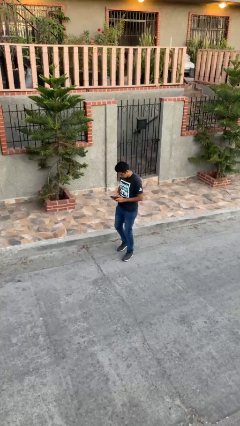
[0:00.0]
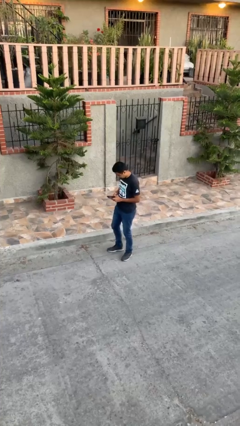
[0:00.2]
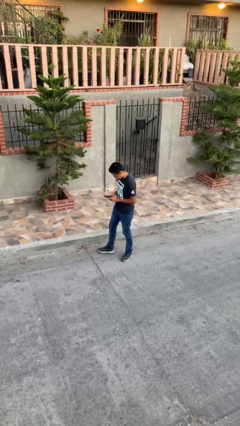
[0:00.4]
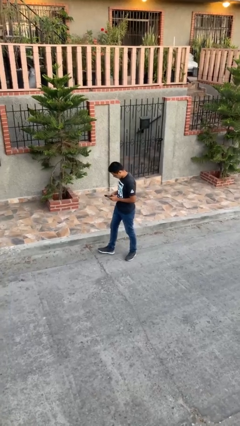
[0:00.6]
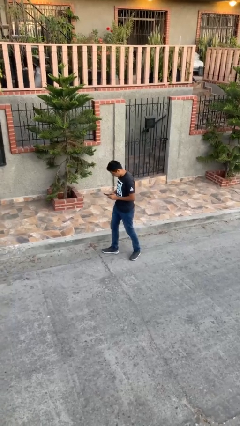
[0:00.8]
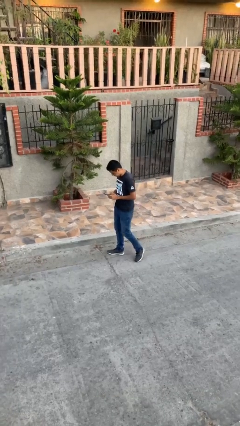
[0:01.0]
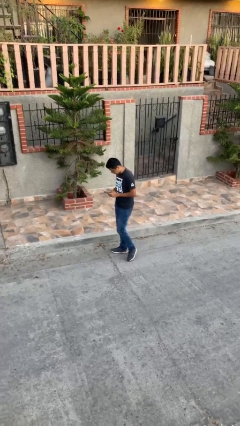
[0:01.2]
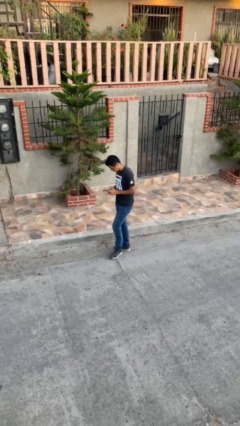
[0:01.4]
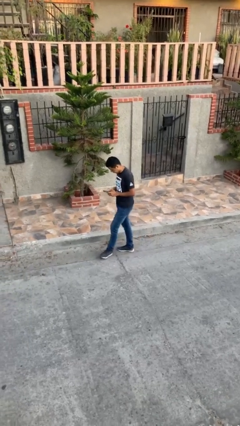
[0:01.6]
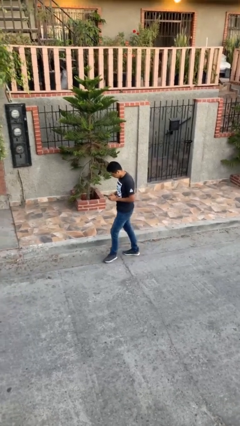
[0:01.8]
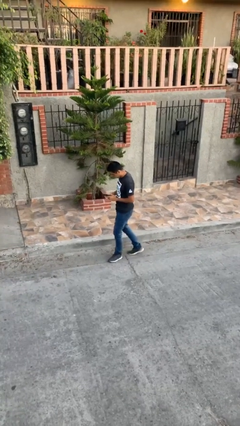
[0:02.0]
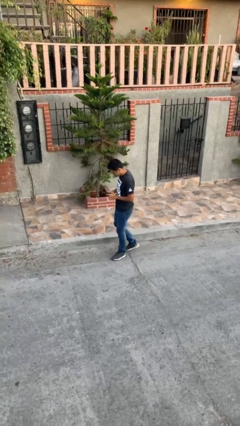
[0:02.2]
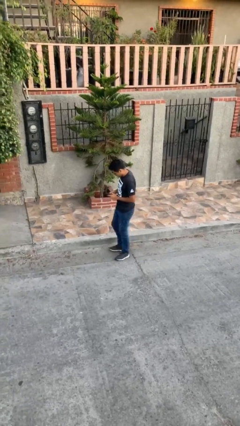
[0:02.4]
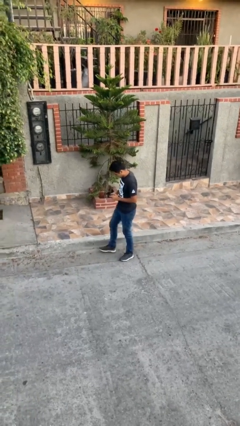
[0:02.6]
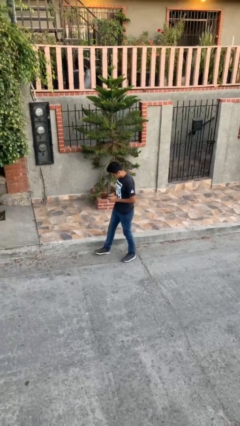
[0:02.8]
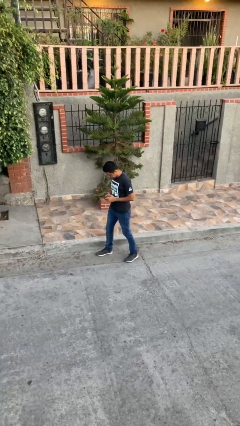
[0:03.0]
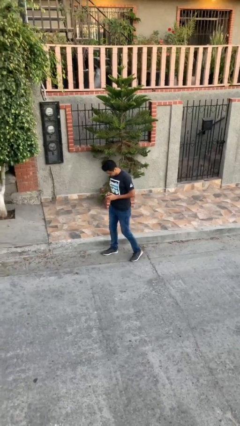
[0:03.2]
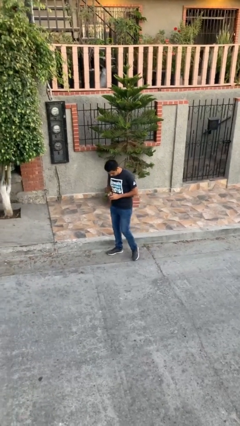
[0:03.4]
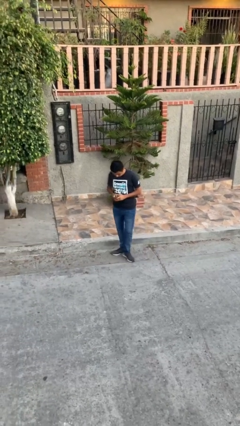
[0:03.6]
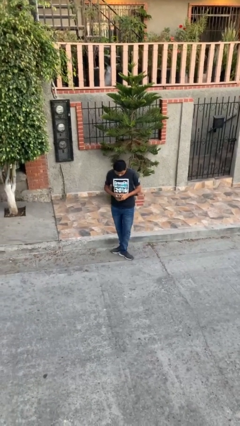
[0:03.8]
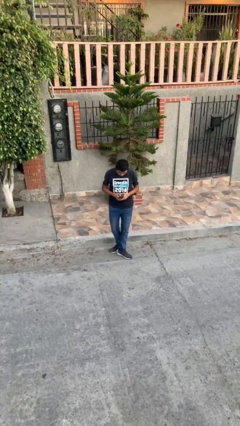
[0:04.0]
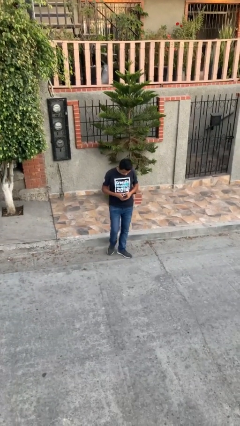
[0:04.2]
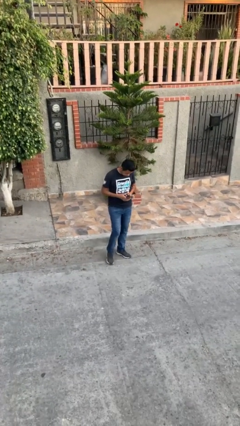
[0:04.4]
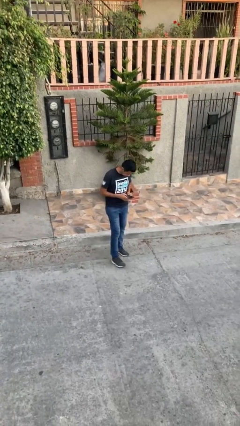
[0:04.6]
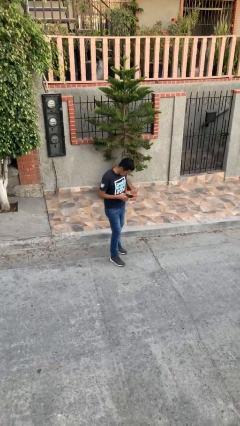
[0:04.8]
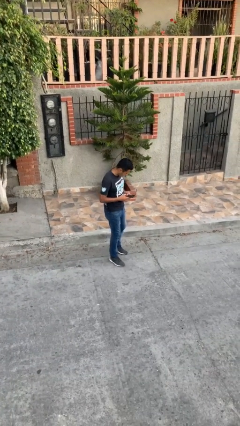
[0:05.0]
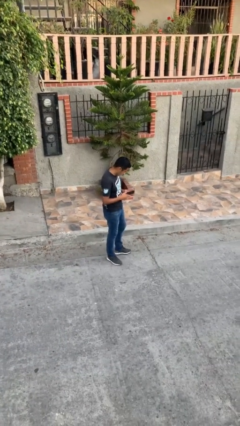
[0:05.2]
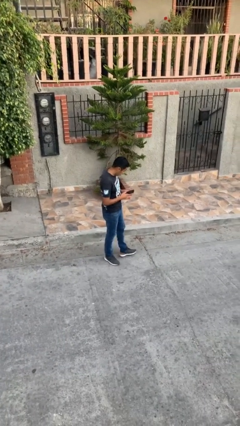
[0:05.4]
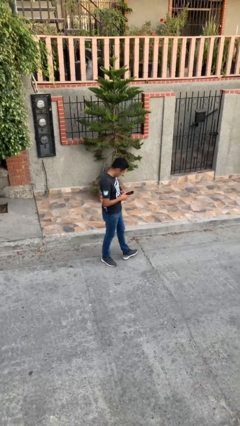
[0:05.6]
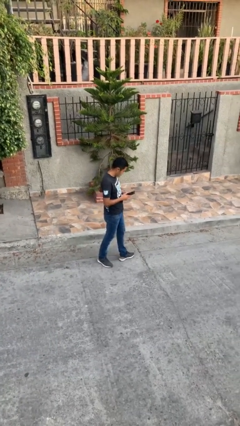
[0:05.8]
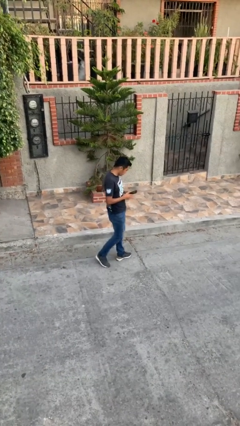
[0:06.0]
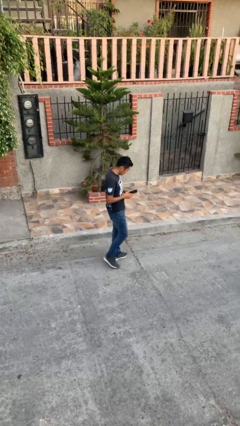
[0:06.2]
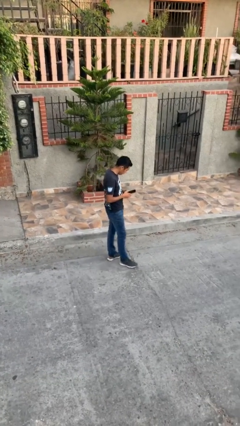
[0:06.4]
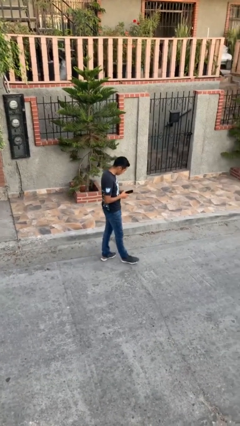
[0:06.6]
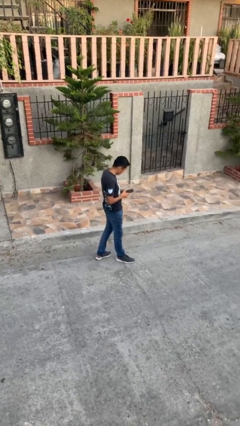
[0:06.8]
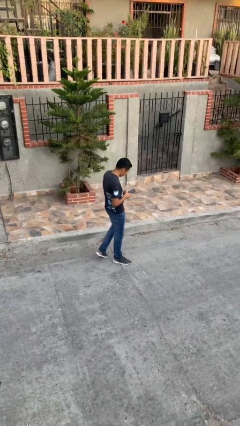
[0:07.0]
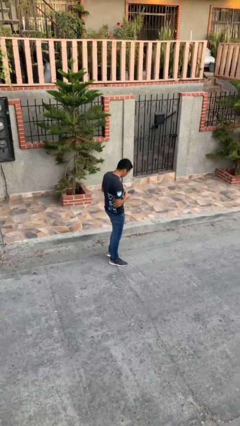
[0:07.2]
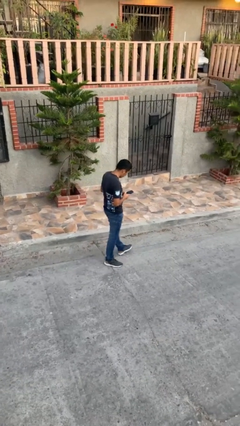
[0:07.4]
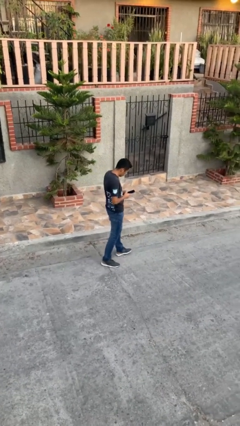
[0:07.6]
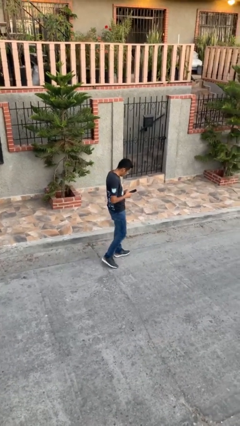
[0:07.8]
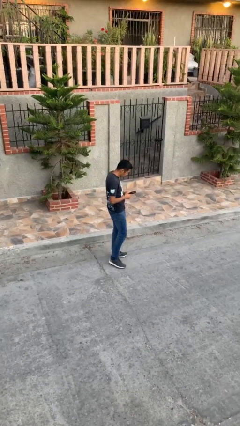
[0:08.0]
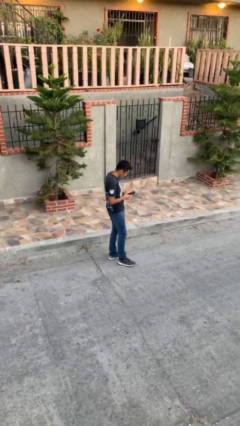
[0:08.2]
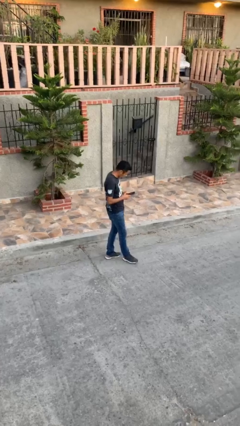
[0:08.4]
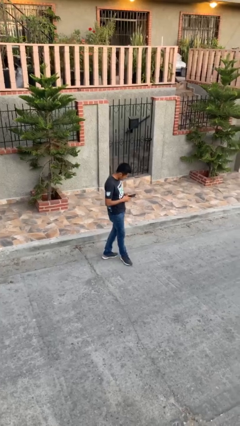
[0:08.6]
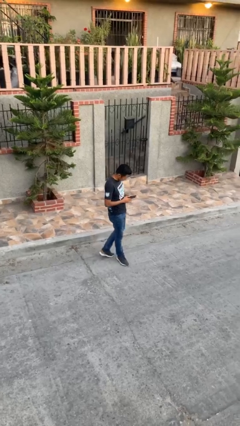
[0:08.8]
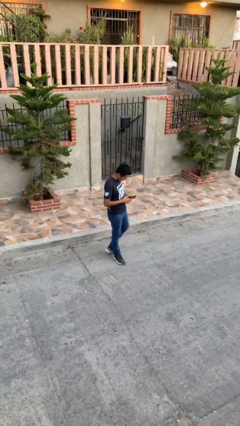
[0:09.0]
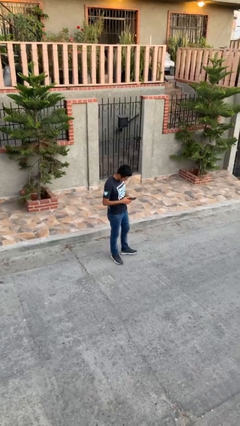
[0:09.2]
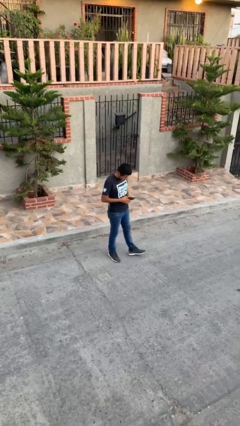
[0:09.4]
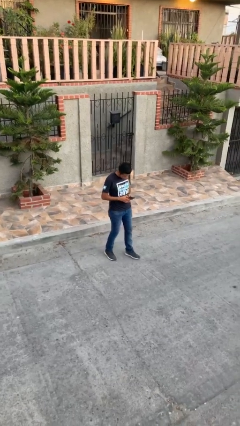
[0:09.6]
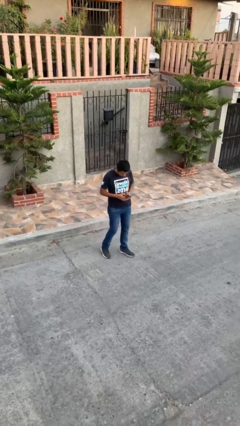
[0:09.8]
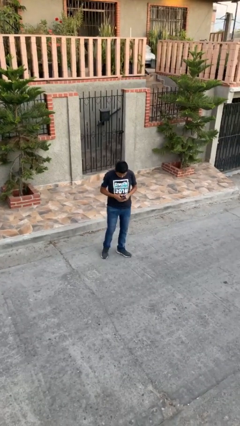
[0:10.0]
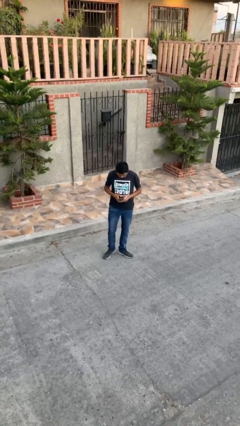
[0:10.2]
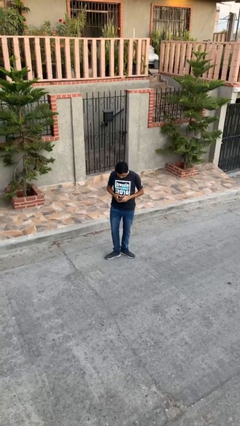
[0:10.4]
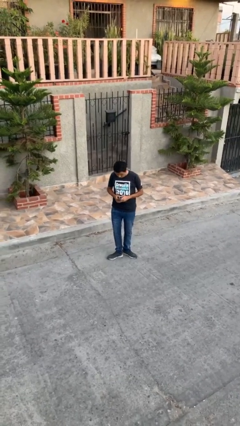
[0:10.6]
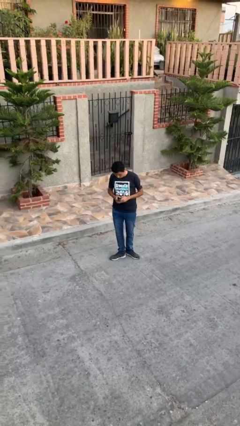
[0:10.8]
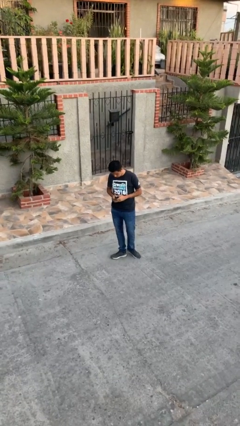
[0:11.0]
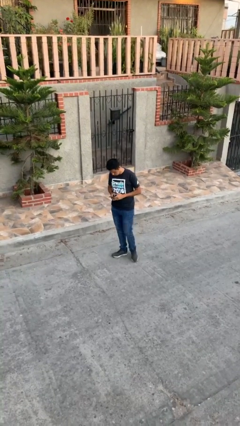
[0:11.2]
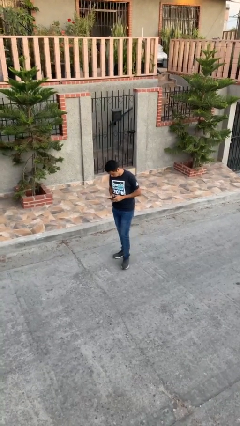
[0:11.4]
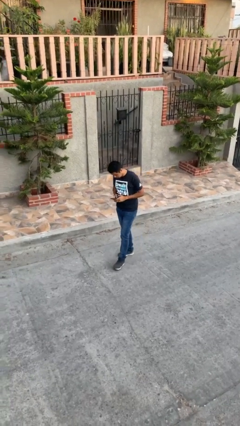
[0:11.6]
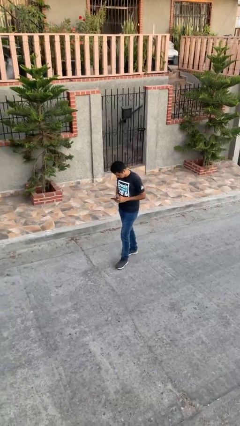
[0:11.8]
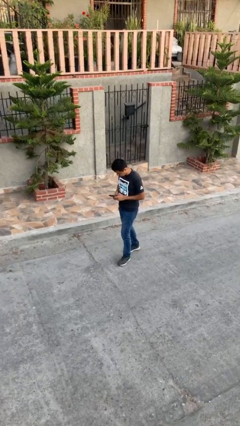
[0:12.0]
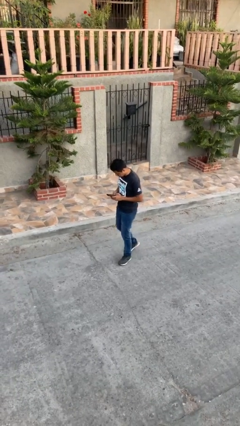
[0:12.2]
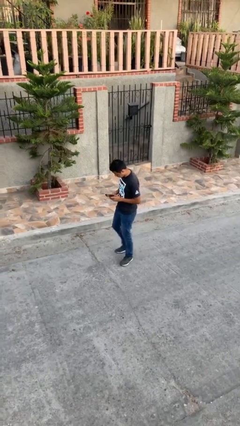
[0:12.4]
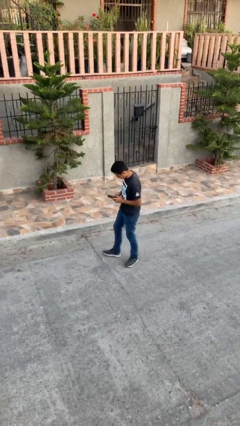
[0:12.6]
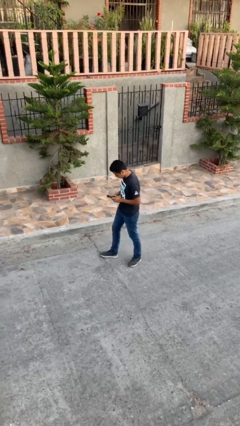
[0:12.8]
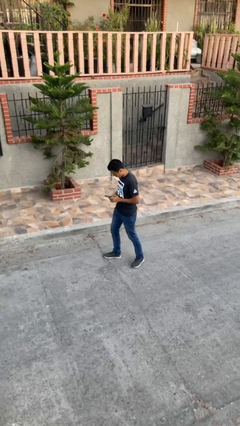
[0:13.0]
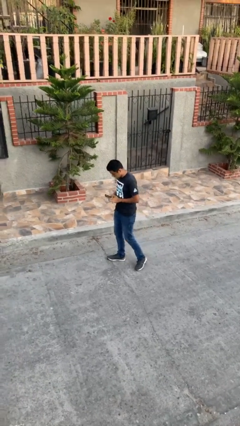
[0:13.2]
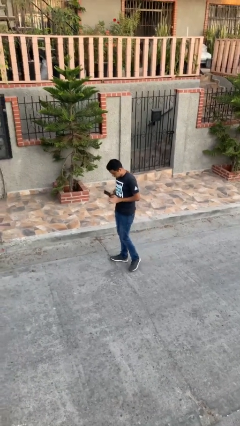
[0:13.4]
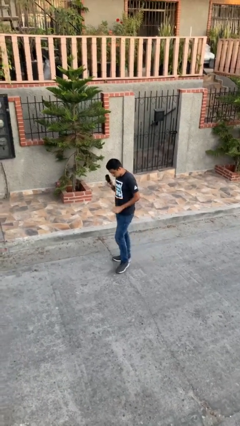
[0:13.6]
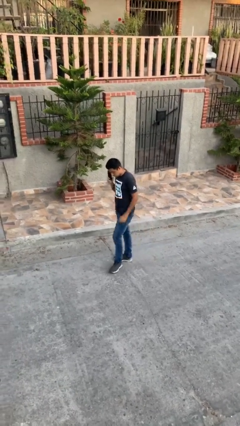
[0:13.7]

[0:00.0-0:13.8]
person texts on phone

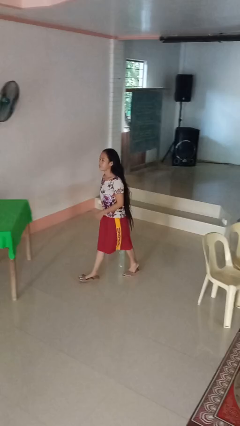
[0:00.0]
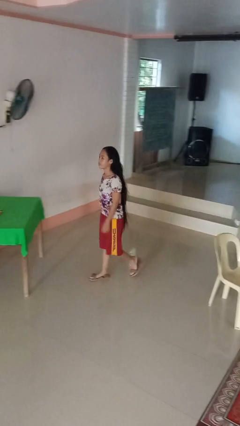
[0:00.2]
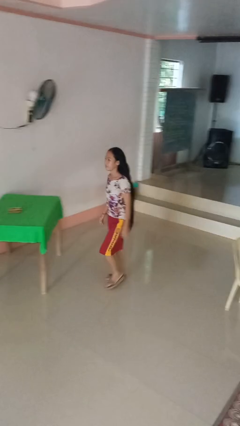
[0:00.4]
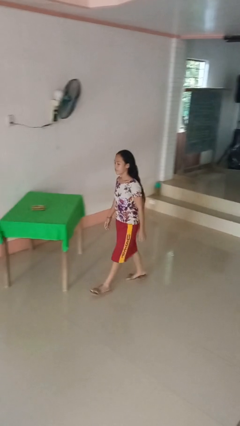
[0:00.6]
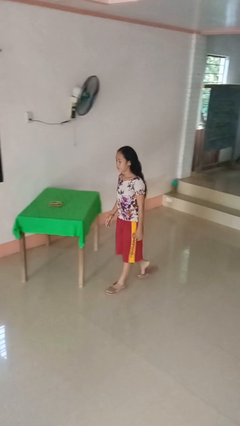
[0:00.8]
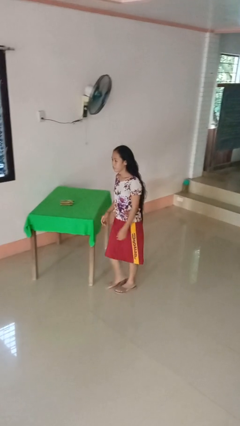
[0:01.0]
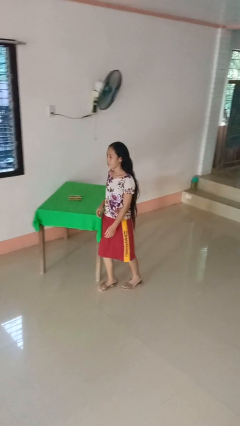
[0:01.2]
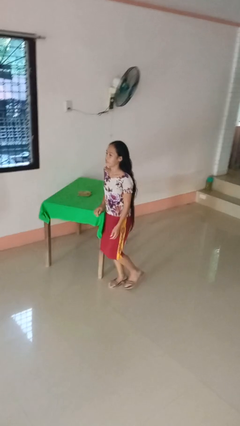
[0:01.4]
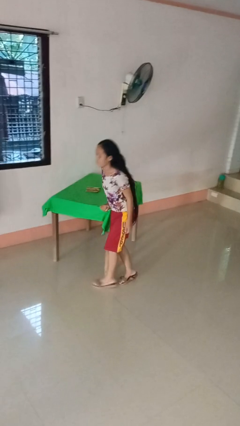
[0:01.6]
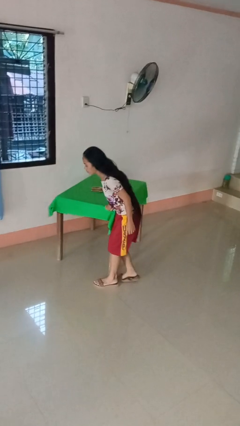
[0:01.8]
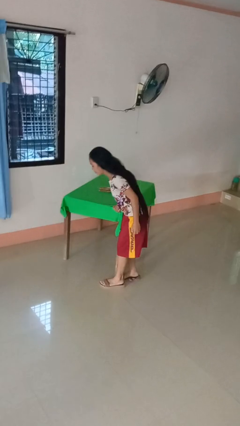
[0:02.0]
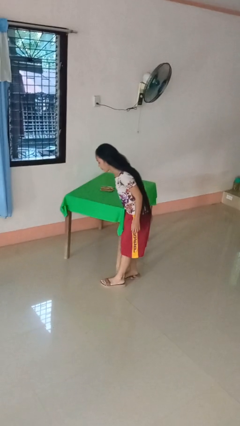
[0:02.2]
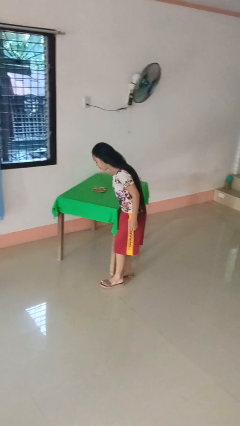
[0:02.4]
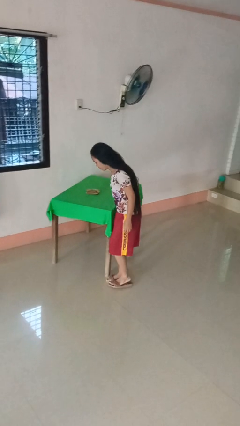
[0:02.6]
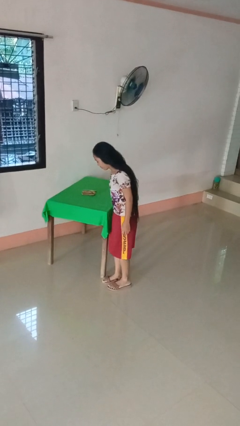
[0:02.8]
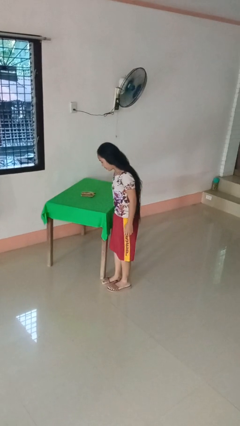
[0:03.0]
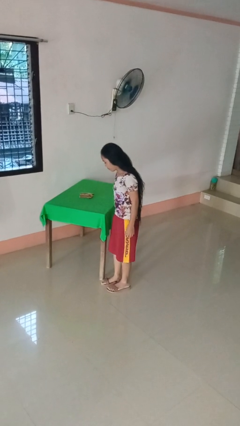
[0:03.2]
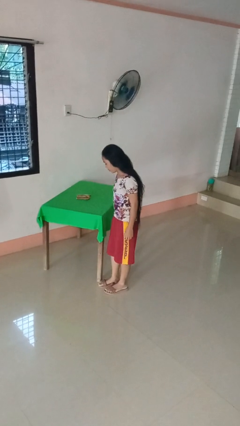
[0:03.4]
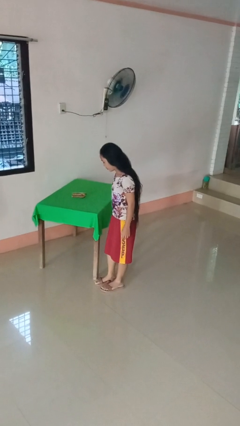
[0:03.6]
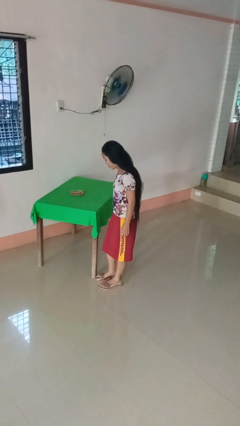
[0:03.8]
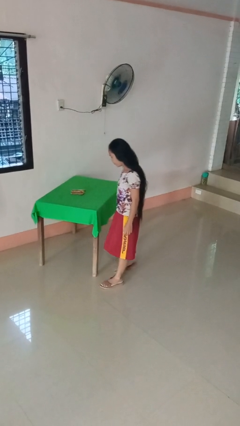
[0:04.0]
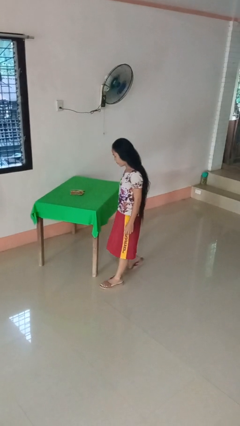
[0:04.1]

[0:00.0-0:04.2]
person bumps into table
